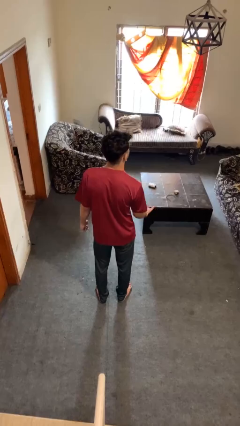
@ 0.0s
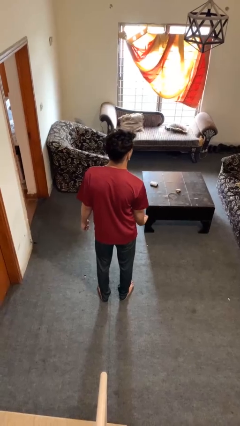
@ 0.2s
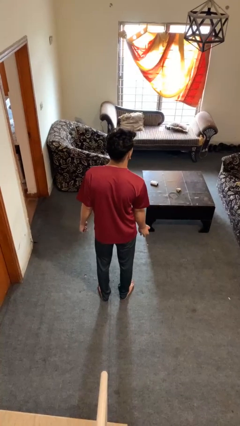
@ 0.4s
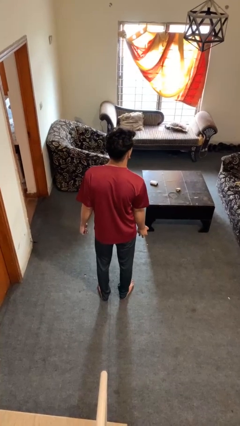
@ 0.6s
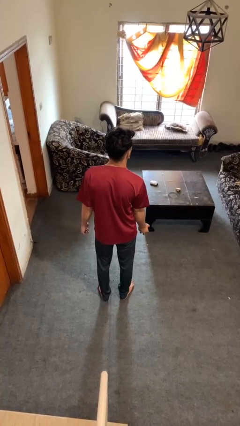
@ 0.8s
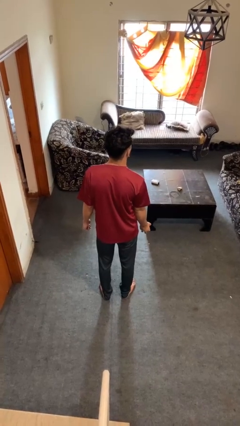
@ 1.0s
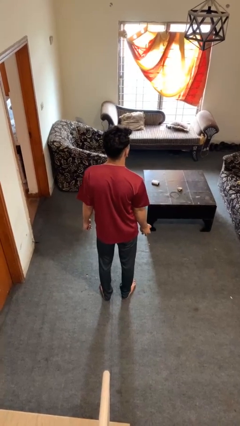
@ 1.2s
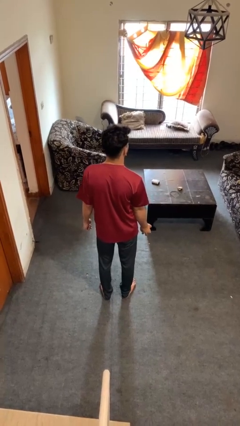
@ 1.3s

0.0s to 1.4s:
person catches dropped object

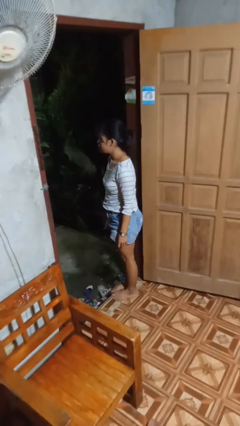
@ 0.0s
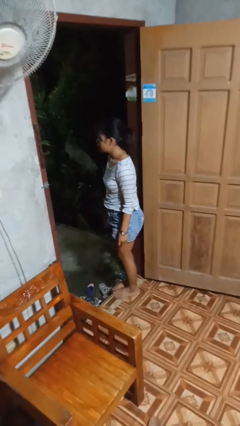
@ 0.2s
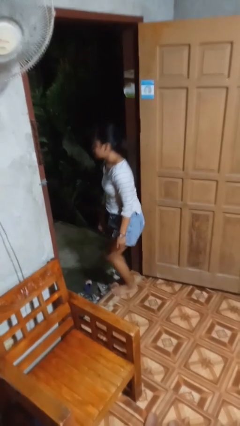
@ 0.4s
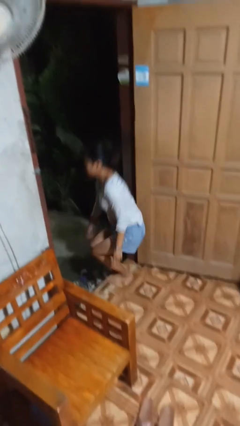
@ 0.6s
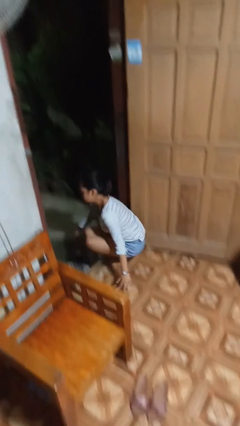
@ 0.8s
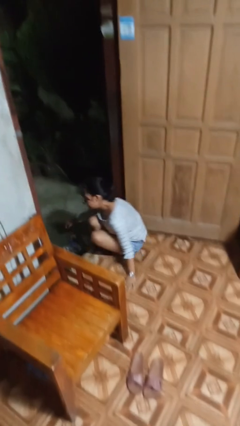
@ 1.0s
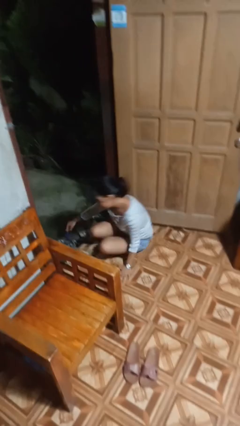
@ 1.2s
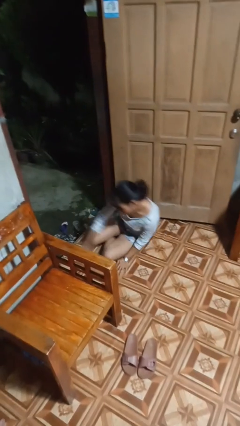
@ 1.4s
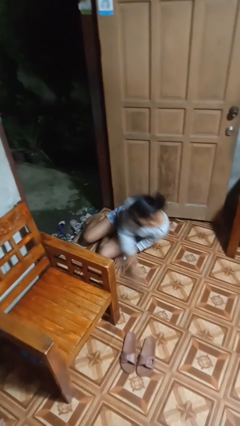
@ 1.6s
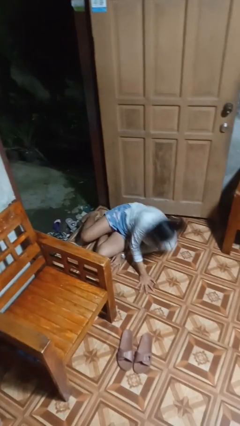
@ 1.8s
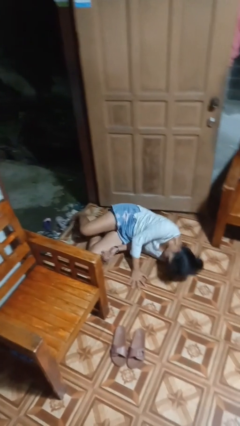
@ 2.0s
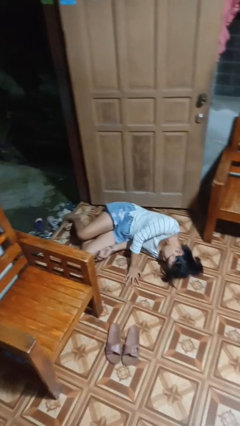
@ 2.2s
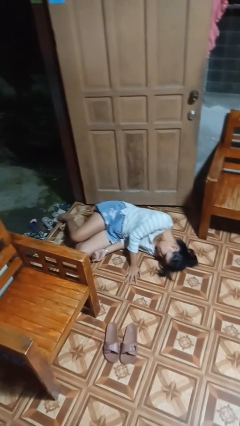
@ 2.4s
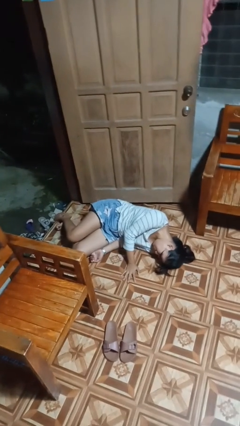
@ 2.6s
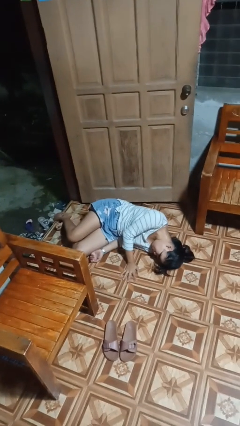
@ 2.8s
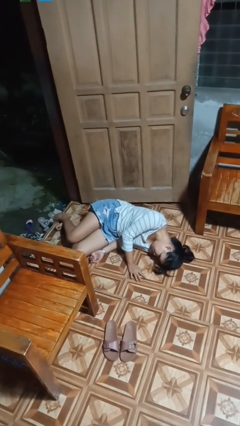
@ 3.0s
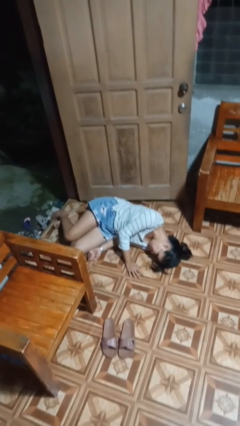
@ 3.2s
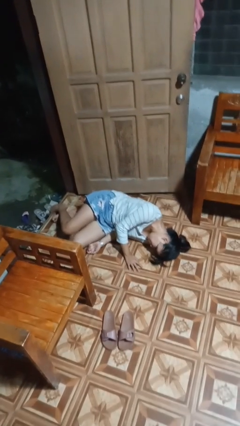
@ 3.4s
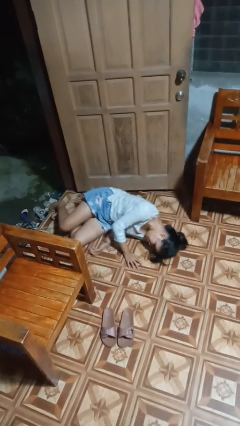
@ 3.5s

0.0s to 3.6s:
person falls while standing

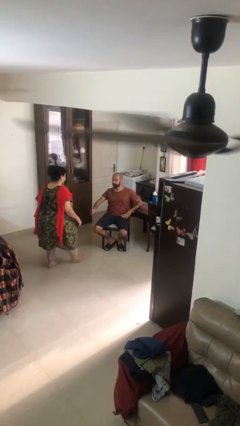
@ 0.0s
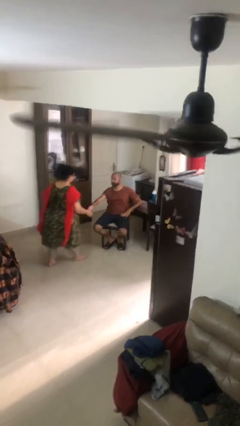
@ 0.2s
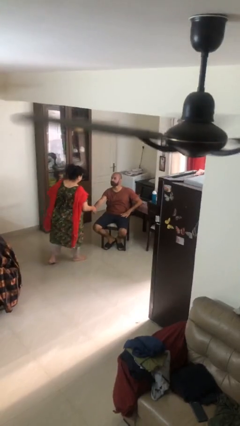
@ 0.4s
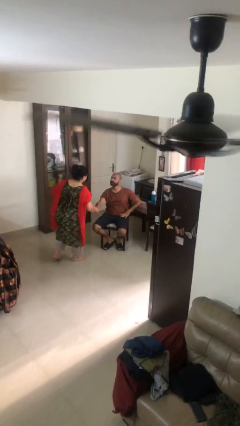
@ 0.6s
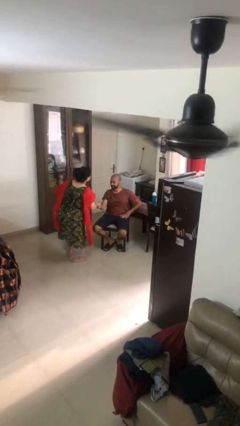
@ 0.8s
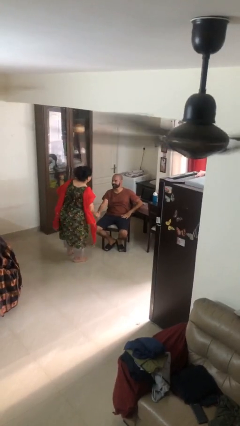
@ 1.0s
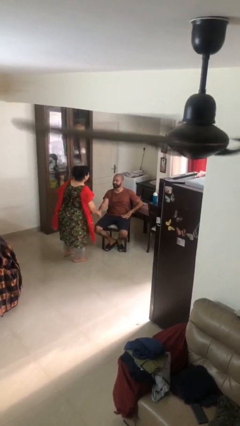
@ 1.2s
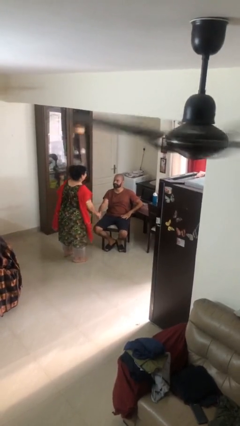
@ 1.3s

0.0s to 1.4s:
person shakes hand

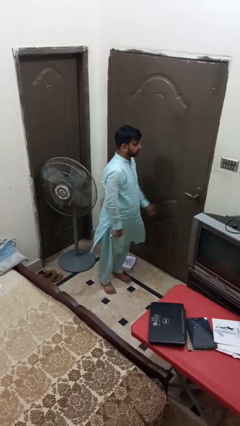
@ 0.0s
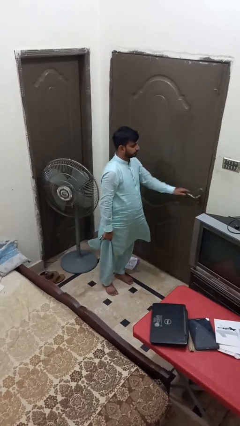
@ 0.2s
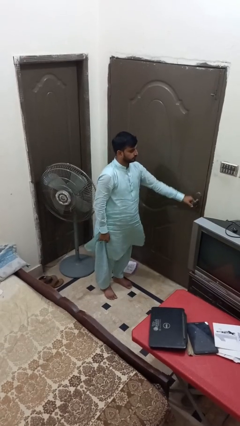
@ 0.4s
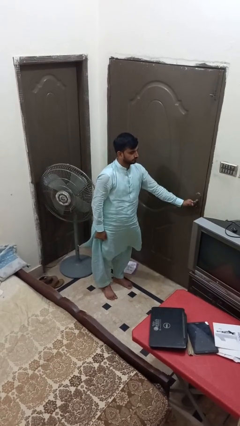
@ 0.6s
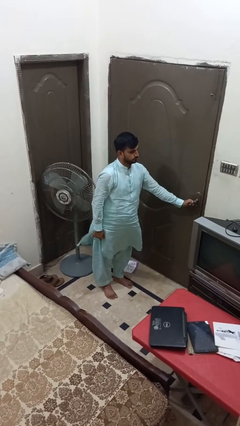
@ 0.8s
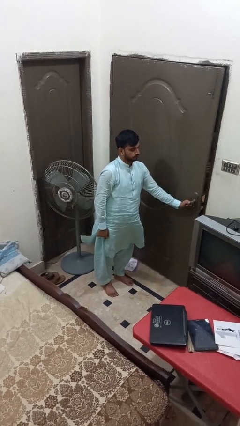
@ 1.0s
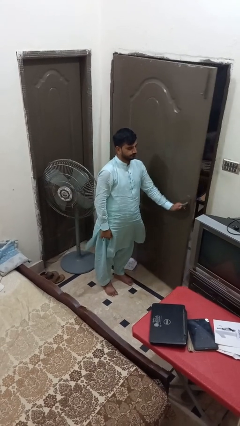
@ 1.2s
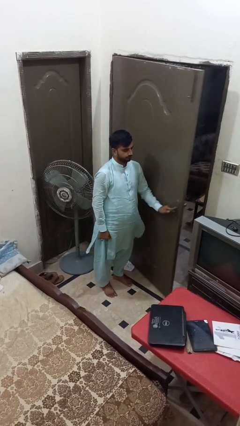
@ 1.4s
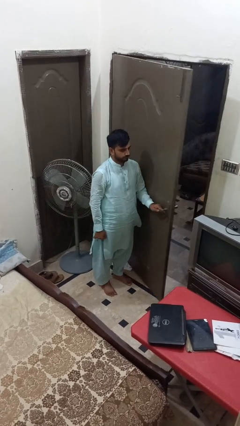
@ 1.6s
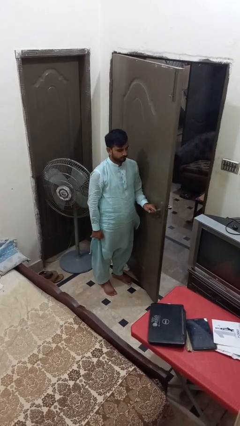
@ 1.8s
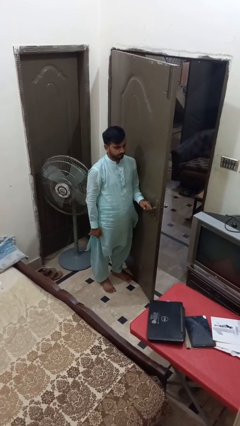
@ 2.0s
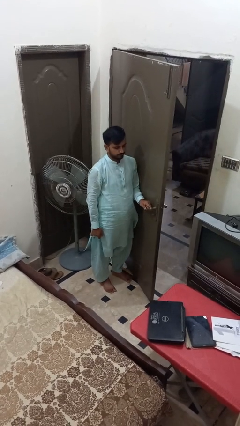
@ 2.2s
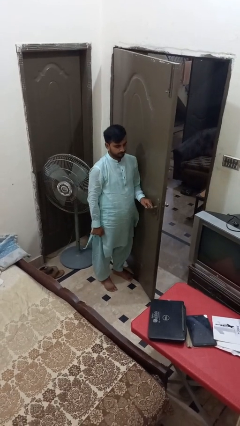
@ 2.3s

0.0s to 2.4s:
person opens facility door

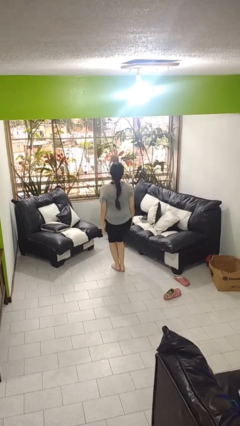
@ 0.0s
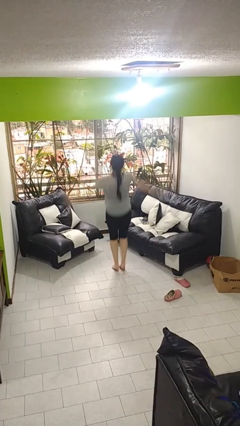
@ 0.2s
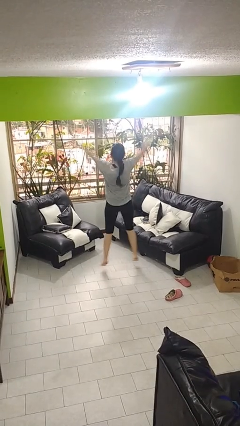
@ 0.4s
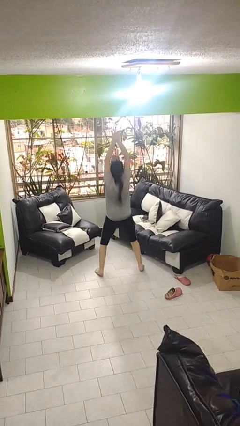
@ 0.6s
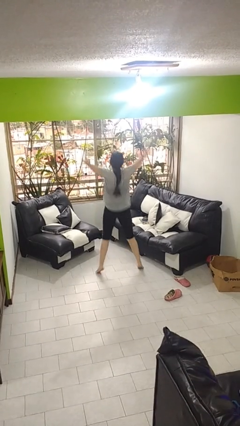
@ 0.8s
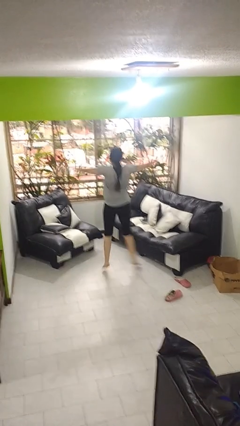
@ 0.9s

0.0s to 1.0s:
person exercises with jumping jacks

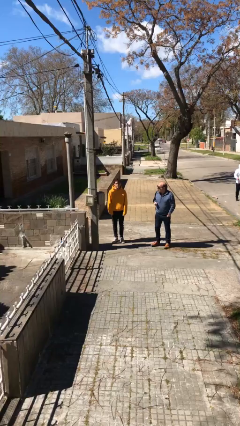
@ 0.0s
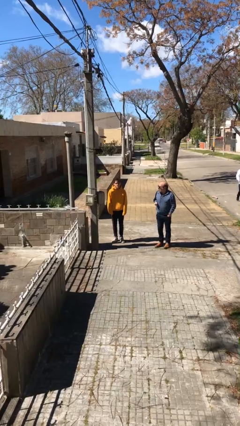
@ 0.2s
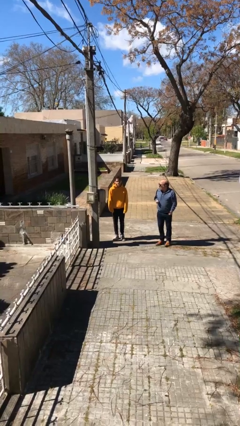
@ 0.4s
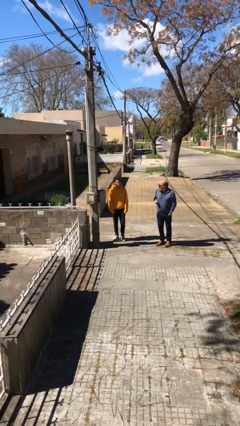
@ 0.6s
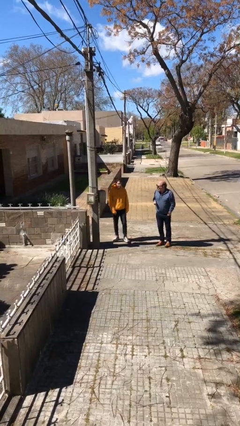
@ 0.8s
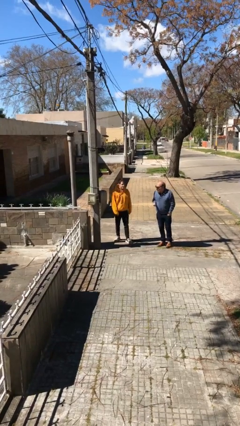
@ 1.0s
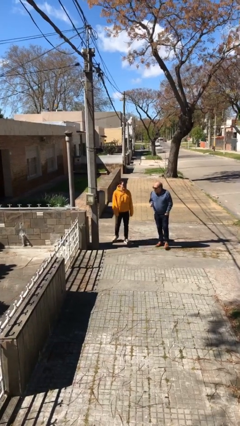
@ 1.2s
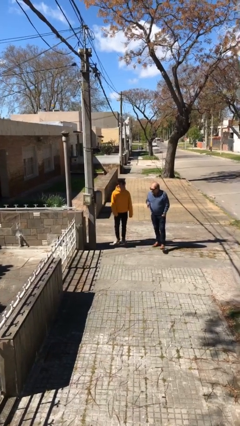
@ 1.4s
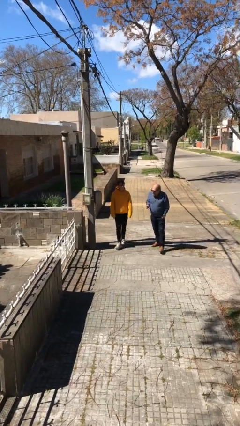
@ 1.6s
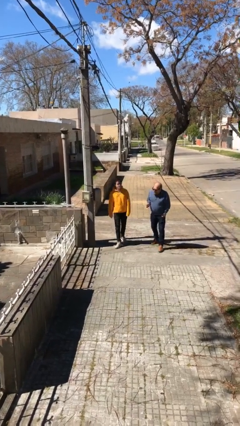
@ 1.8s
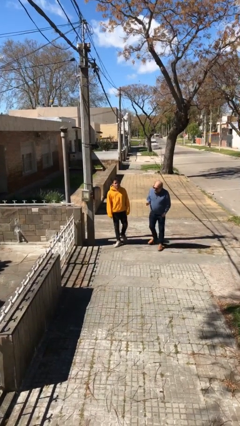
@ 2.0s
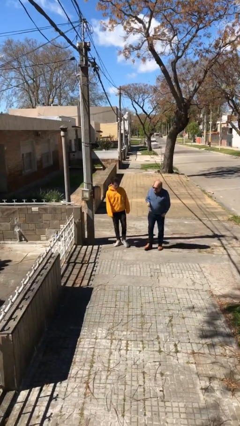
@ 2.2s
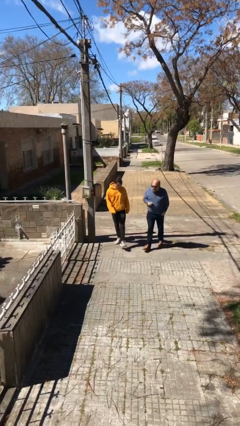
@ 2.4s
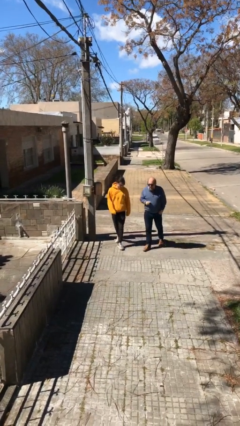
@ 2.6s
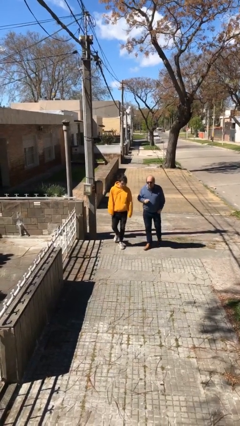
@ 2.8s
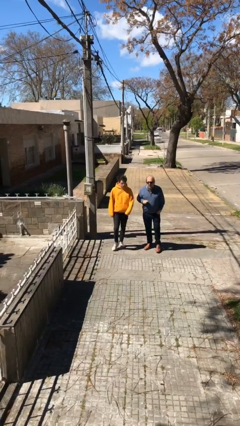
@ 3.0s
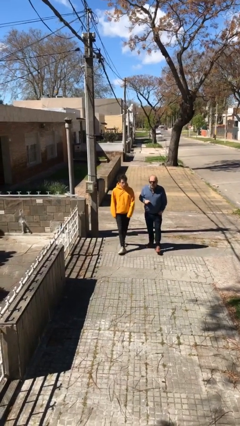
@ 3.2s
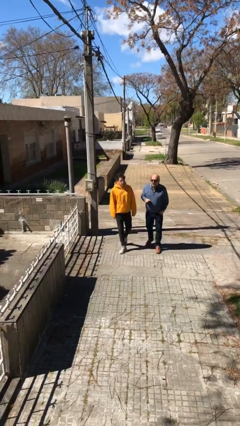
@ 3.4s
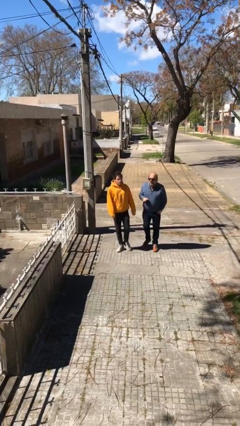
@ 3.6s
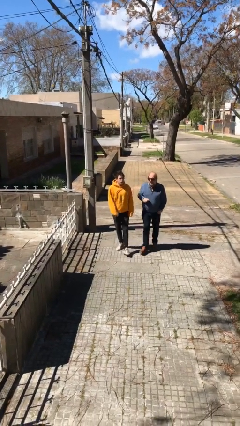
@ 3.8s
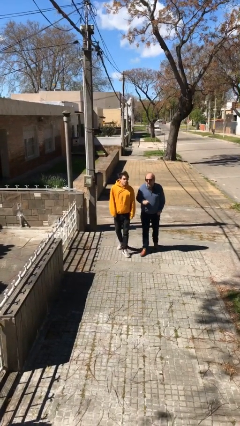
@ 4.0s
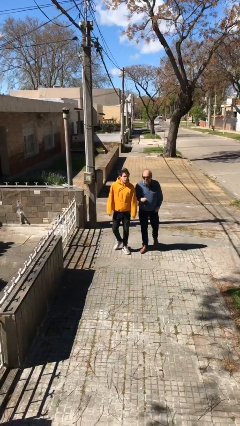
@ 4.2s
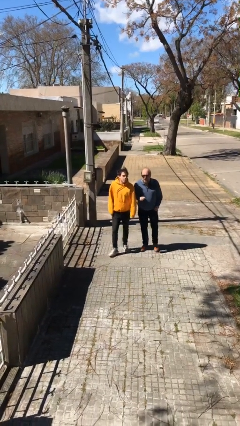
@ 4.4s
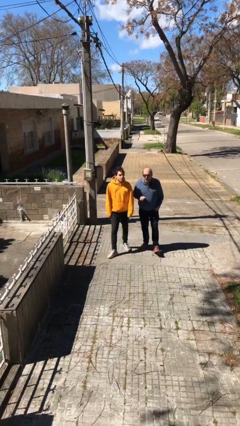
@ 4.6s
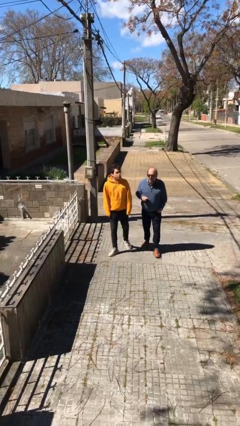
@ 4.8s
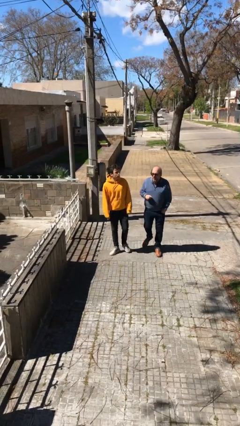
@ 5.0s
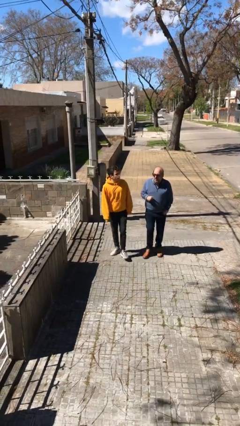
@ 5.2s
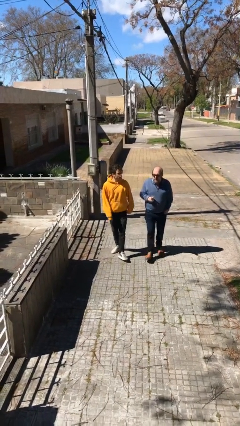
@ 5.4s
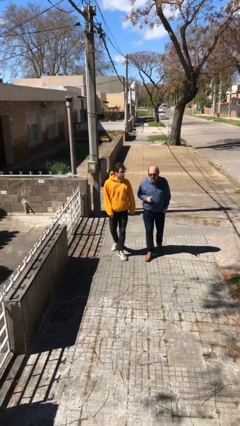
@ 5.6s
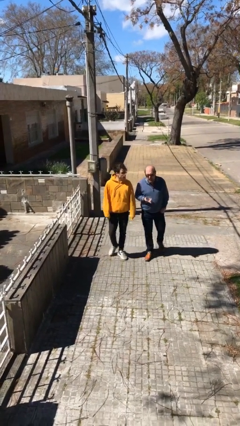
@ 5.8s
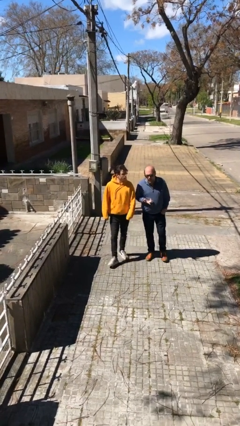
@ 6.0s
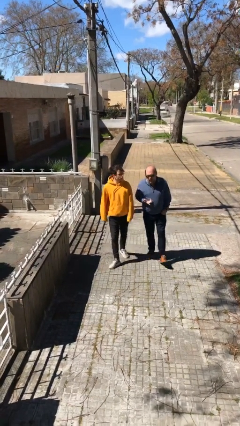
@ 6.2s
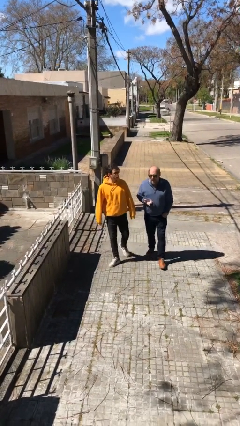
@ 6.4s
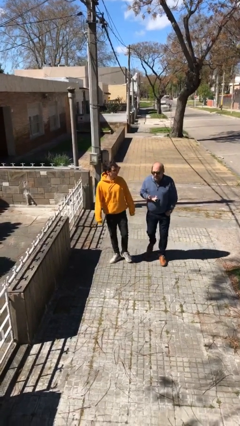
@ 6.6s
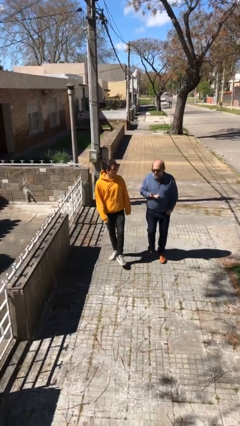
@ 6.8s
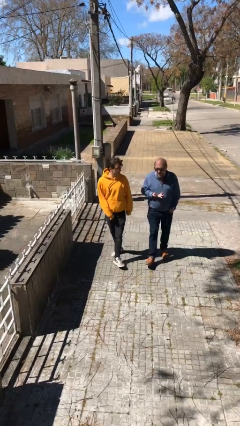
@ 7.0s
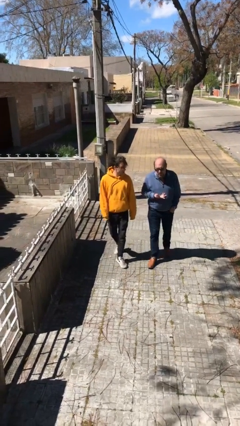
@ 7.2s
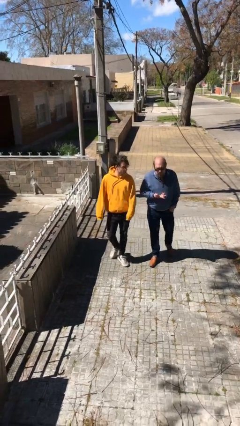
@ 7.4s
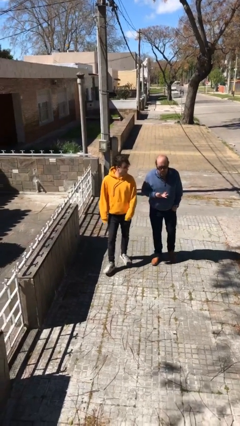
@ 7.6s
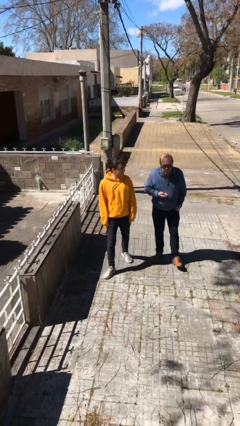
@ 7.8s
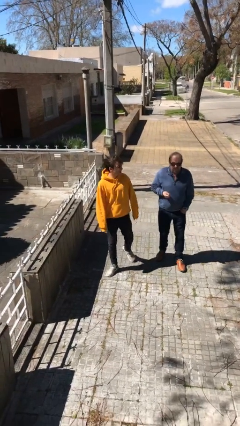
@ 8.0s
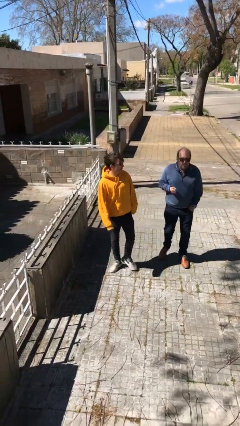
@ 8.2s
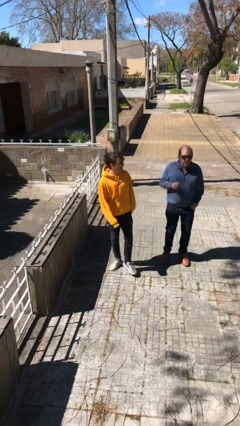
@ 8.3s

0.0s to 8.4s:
person talks to person
